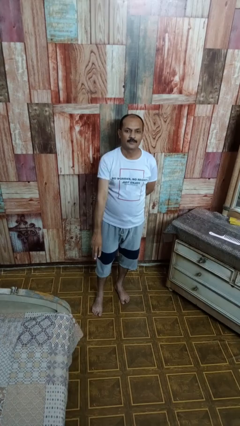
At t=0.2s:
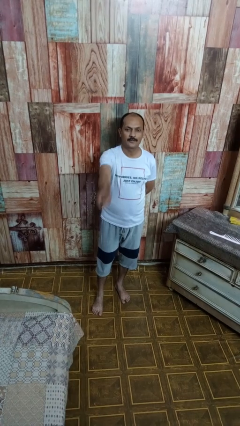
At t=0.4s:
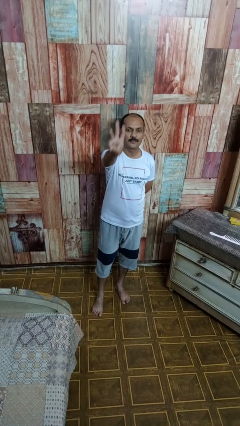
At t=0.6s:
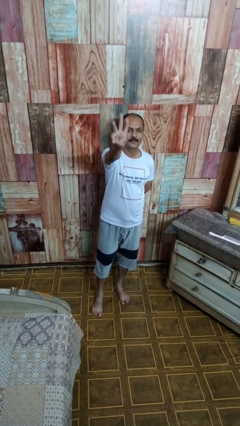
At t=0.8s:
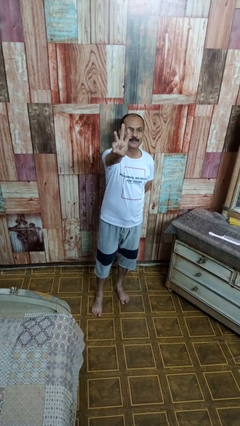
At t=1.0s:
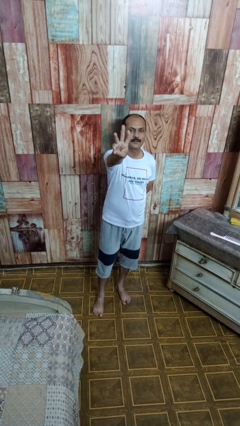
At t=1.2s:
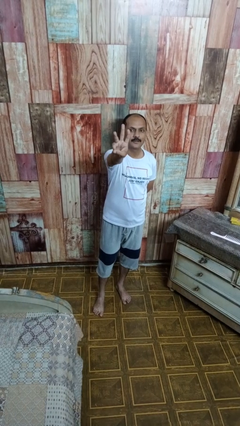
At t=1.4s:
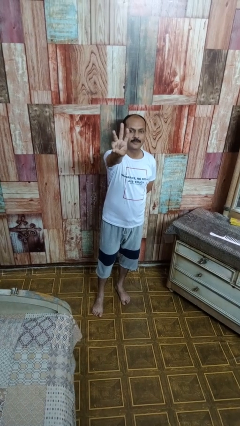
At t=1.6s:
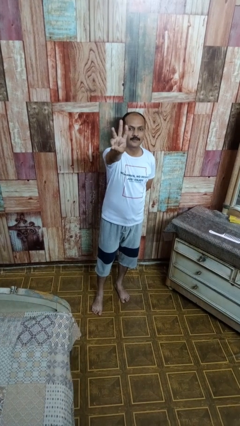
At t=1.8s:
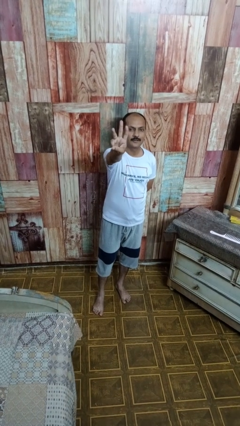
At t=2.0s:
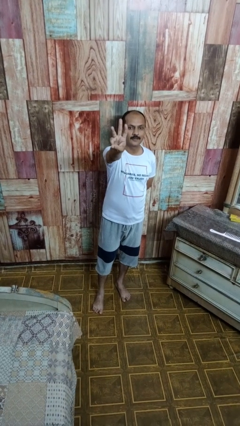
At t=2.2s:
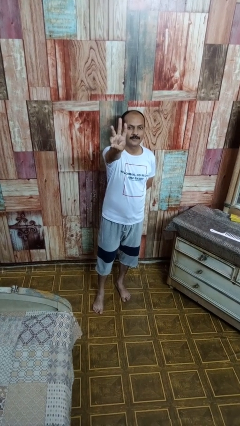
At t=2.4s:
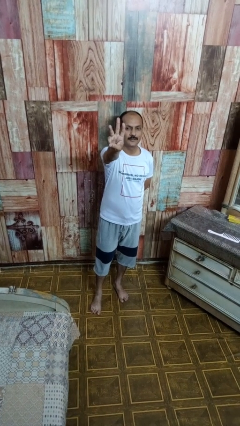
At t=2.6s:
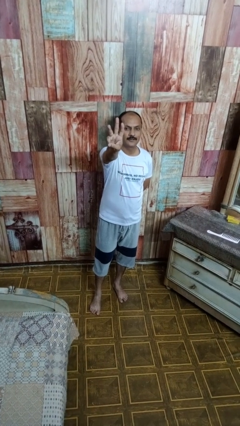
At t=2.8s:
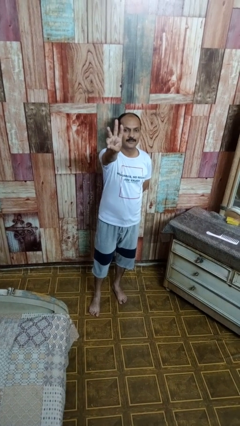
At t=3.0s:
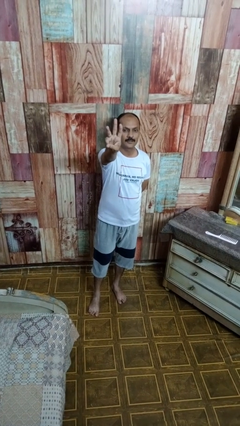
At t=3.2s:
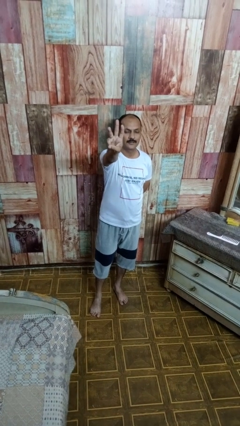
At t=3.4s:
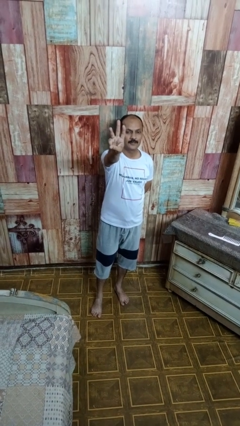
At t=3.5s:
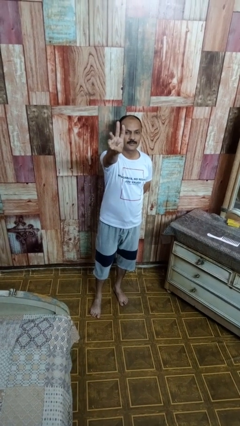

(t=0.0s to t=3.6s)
person gestures number three

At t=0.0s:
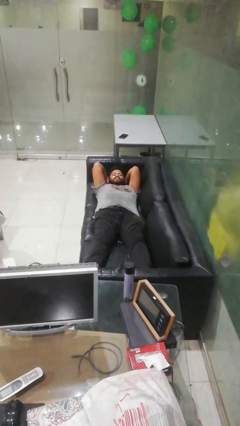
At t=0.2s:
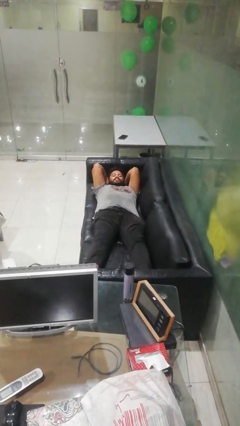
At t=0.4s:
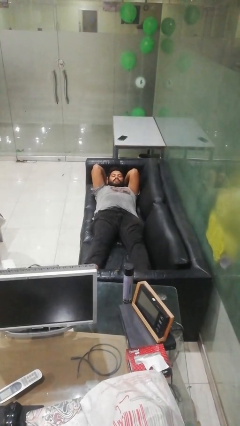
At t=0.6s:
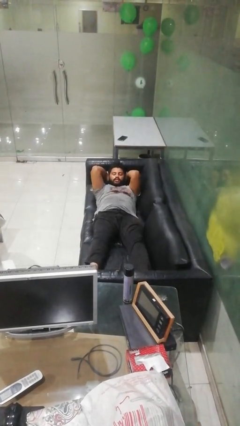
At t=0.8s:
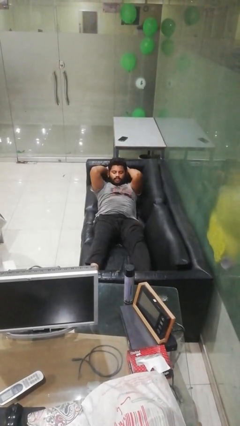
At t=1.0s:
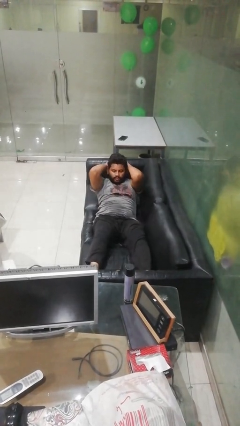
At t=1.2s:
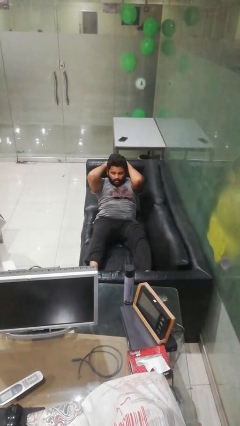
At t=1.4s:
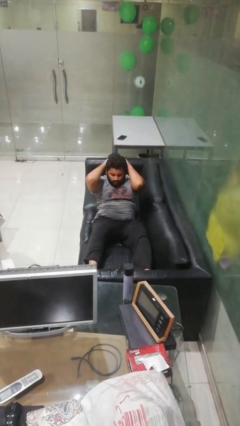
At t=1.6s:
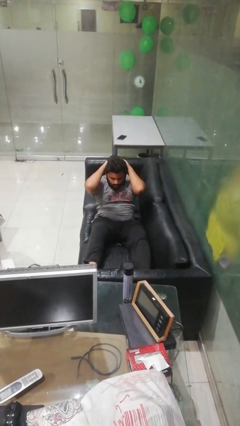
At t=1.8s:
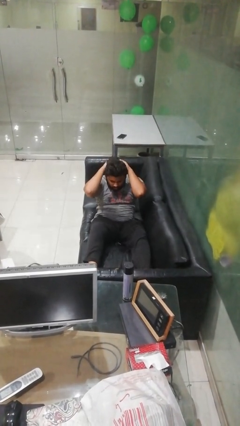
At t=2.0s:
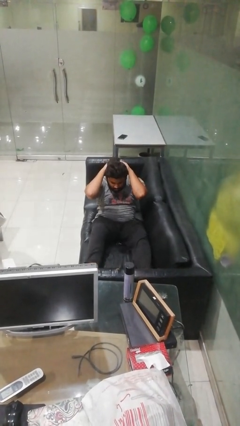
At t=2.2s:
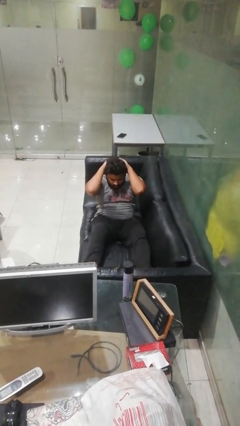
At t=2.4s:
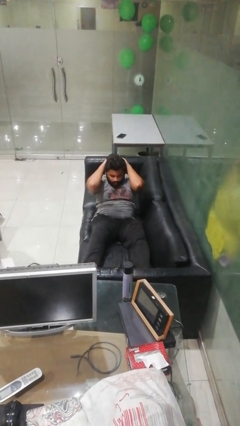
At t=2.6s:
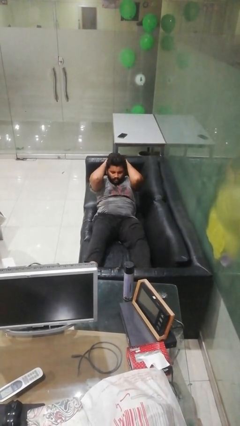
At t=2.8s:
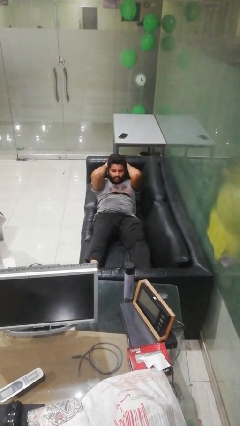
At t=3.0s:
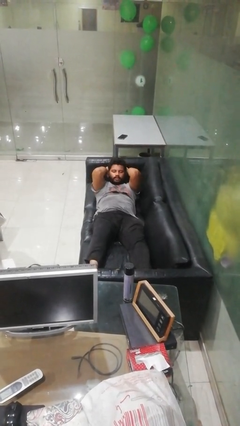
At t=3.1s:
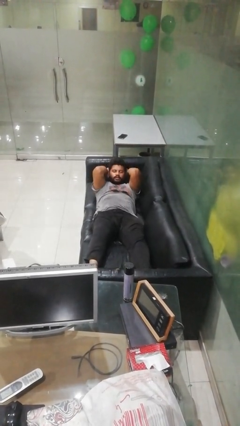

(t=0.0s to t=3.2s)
person exercises with situp

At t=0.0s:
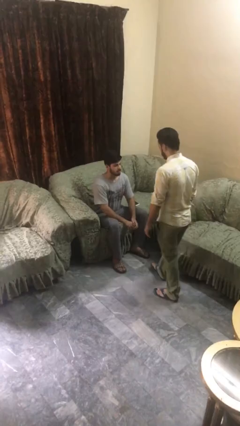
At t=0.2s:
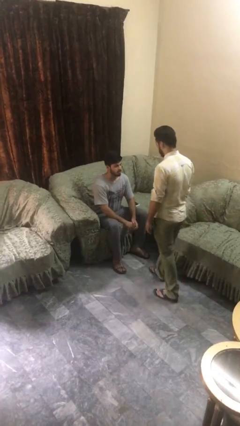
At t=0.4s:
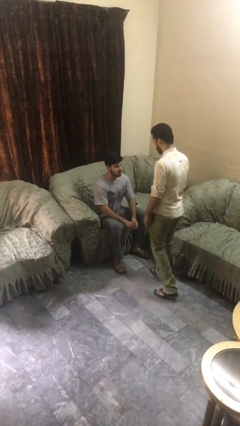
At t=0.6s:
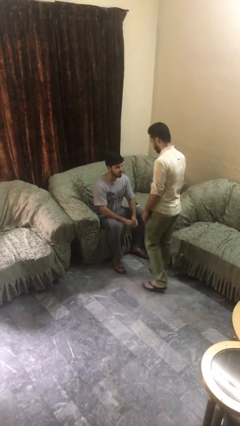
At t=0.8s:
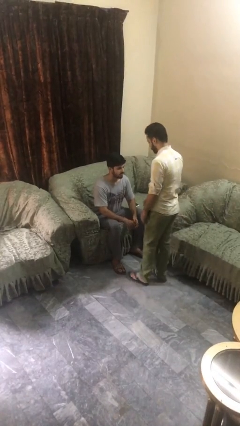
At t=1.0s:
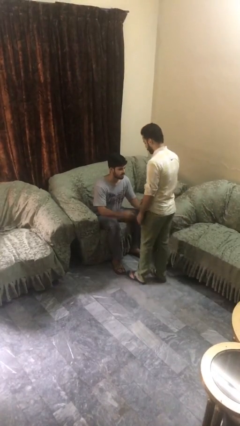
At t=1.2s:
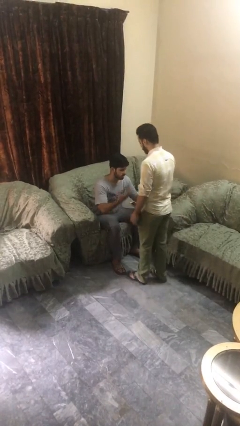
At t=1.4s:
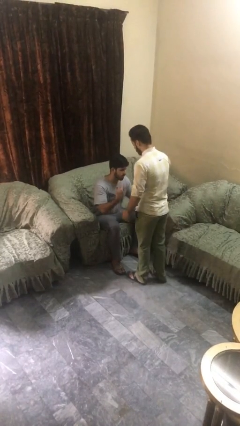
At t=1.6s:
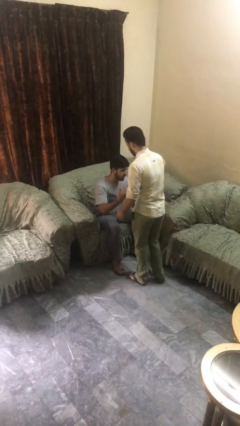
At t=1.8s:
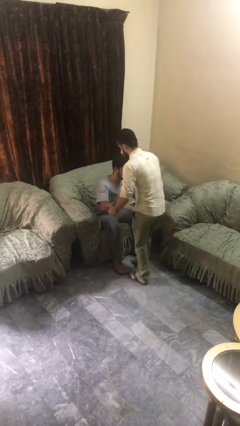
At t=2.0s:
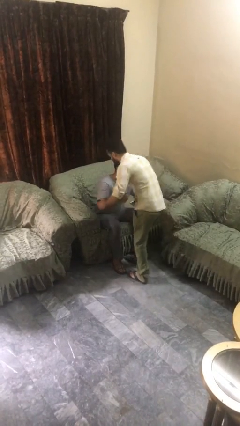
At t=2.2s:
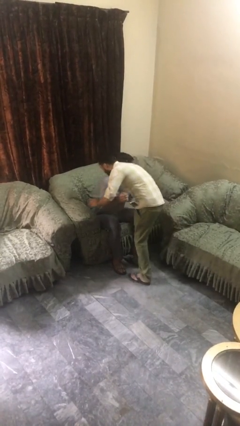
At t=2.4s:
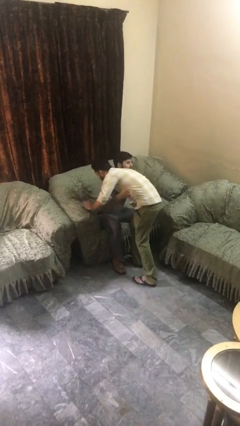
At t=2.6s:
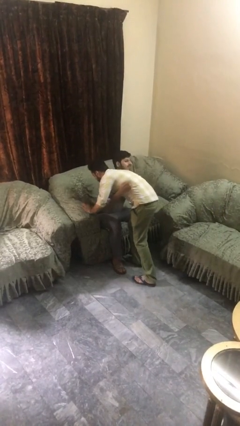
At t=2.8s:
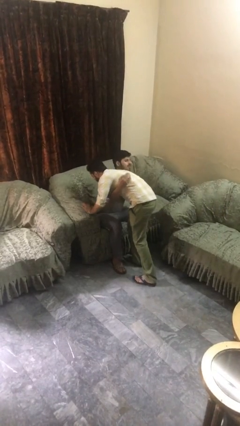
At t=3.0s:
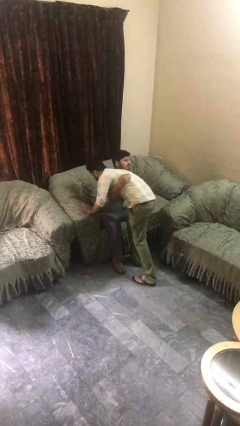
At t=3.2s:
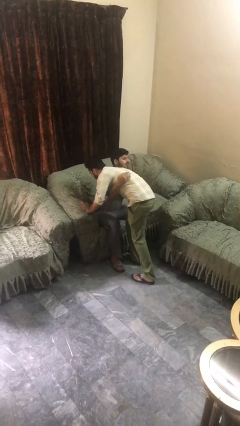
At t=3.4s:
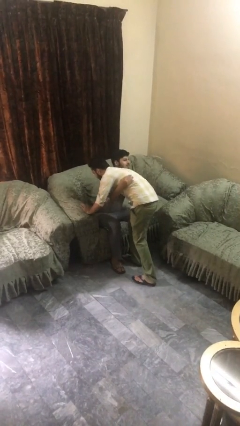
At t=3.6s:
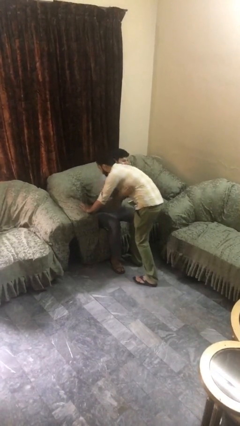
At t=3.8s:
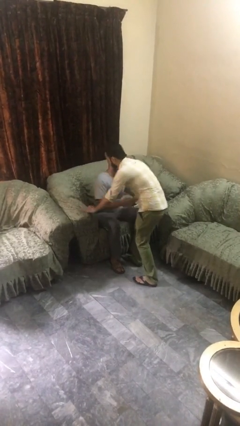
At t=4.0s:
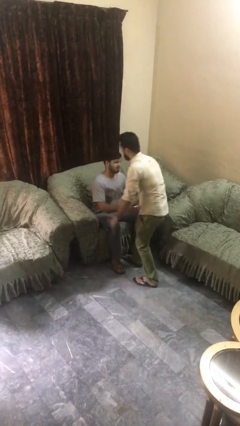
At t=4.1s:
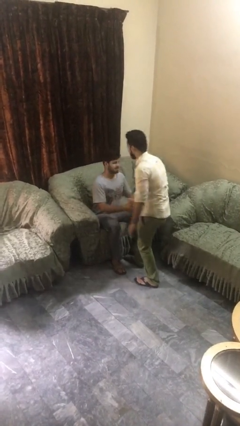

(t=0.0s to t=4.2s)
person embraces person

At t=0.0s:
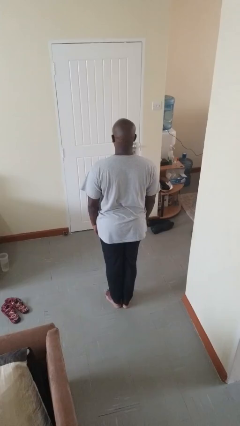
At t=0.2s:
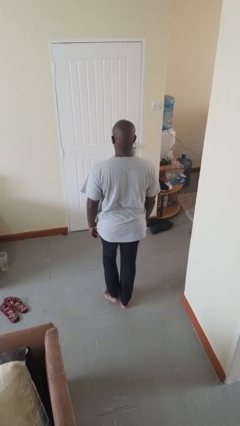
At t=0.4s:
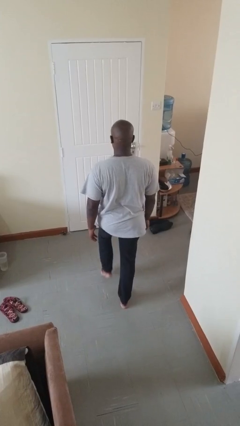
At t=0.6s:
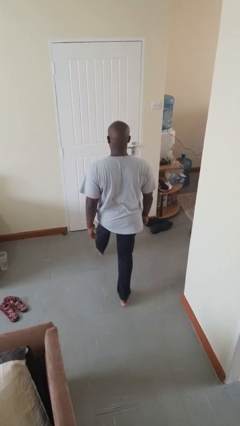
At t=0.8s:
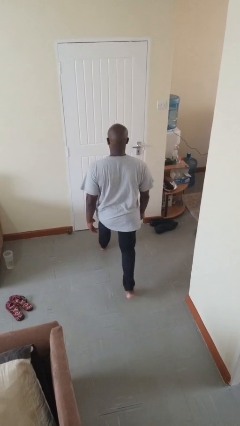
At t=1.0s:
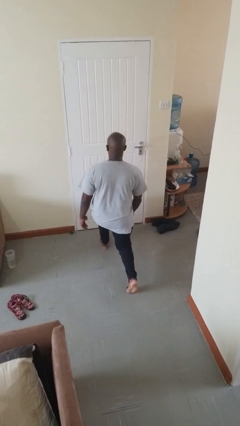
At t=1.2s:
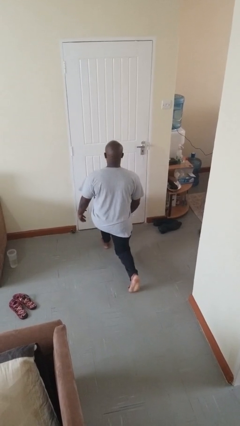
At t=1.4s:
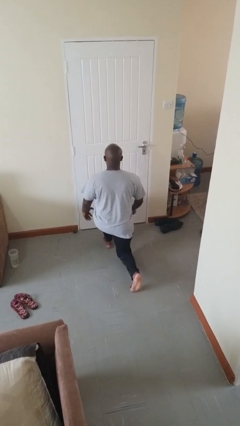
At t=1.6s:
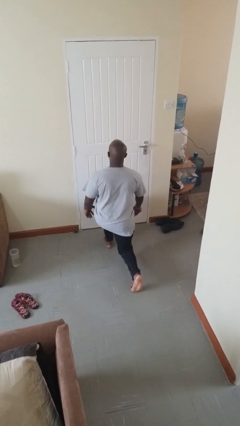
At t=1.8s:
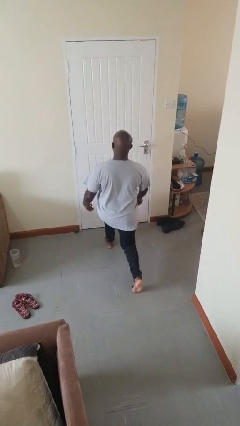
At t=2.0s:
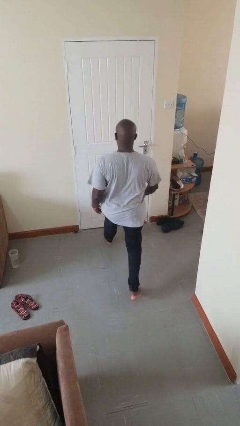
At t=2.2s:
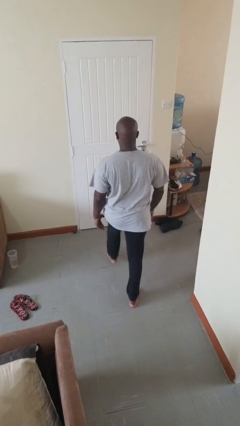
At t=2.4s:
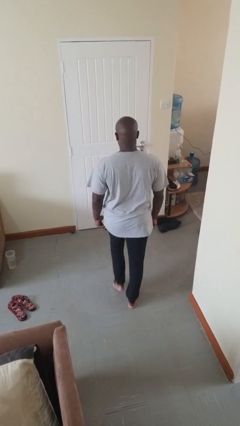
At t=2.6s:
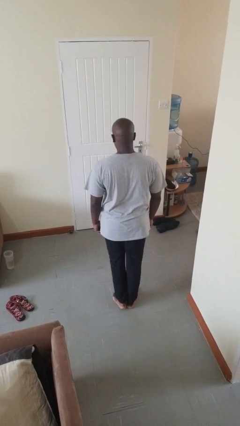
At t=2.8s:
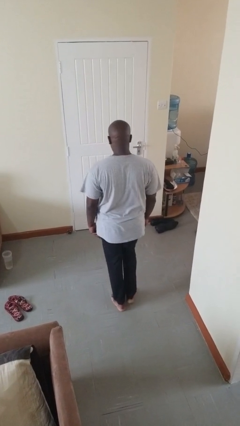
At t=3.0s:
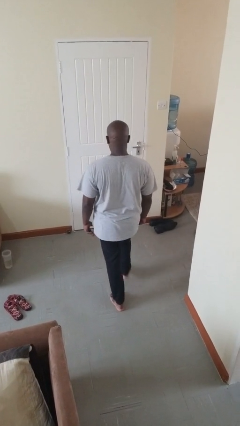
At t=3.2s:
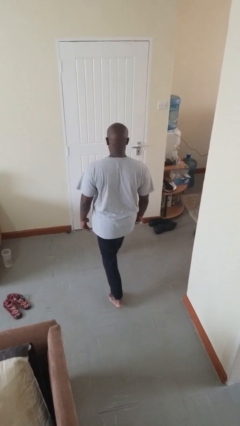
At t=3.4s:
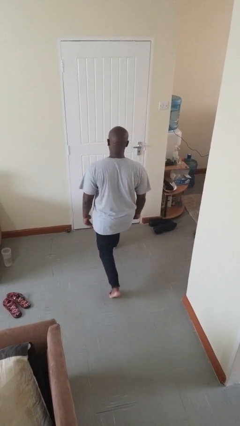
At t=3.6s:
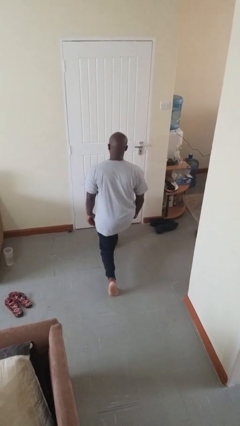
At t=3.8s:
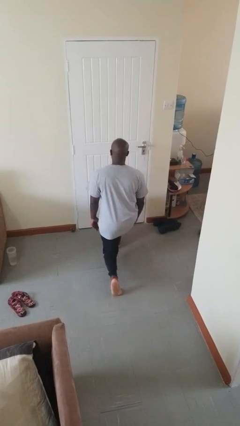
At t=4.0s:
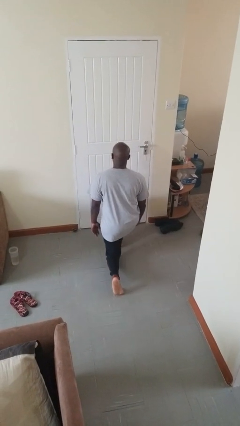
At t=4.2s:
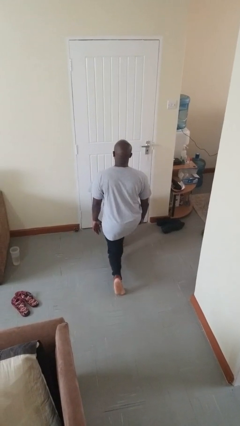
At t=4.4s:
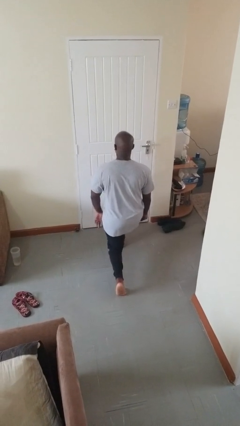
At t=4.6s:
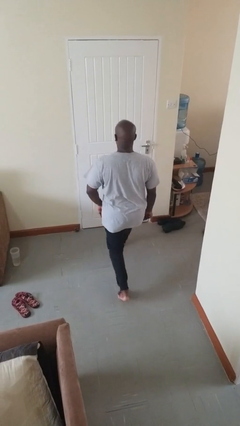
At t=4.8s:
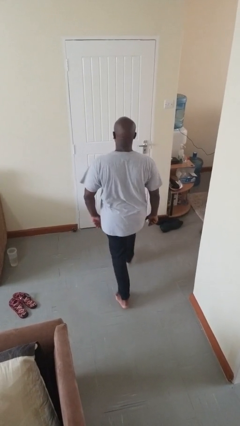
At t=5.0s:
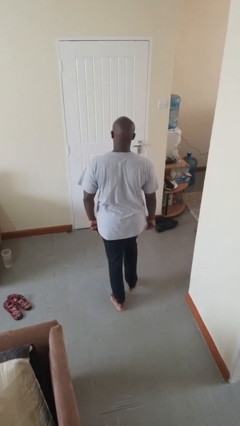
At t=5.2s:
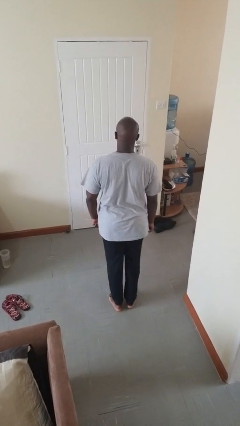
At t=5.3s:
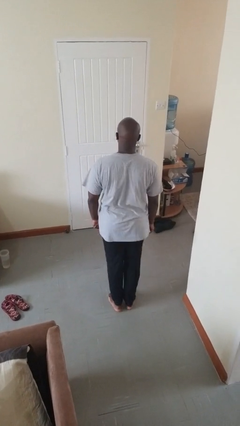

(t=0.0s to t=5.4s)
person exercises with lunges

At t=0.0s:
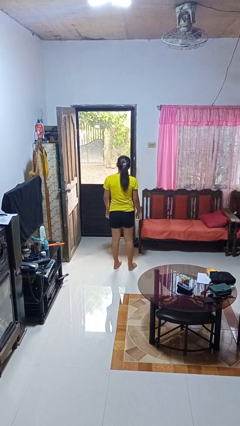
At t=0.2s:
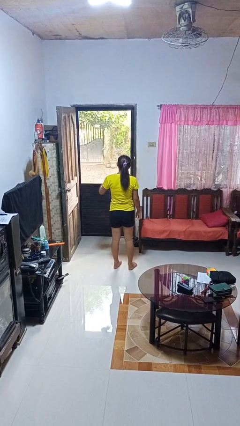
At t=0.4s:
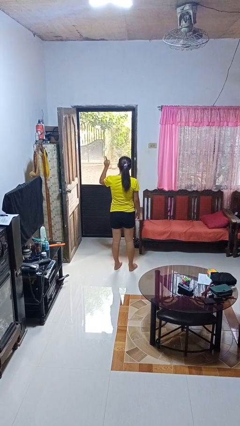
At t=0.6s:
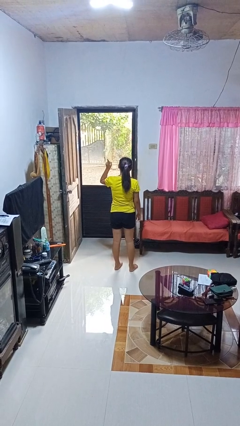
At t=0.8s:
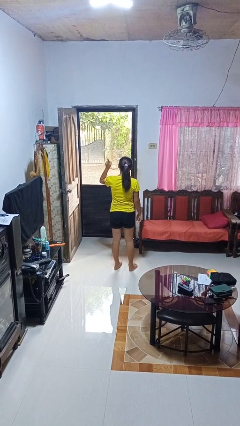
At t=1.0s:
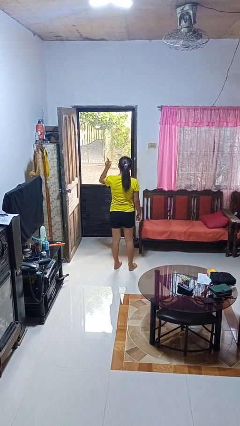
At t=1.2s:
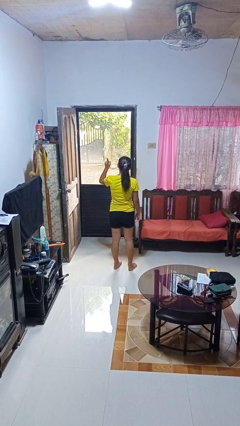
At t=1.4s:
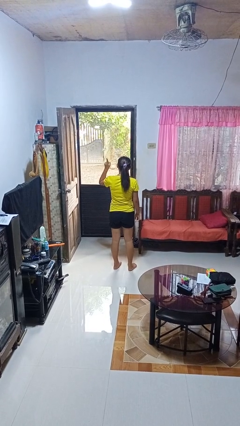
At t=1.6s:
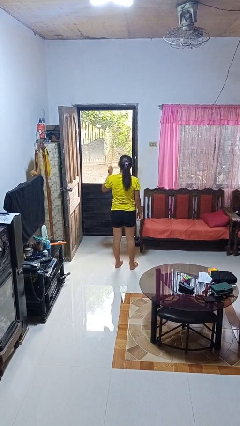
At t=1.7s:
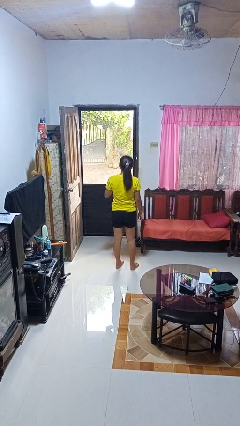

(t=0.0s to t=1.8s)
person gestures number one
